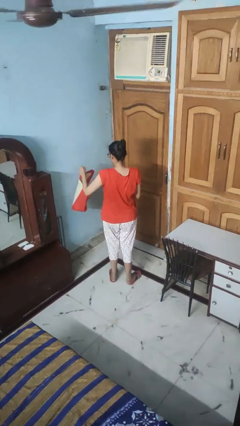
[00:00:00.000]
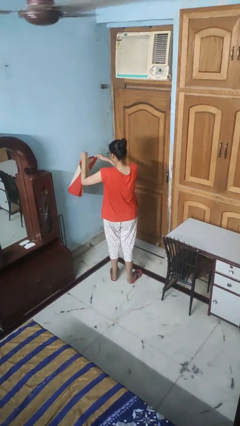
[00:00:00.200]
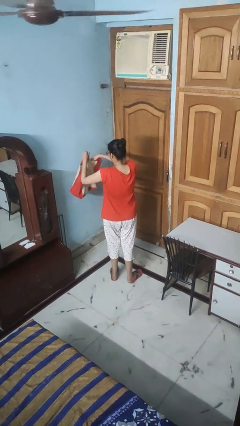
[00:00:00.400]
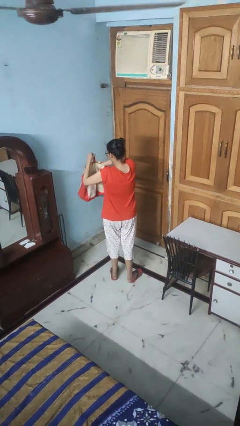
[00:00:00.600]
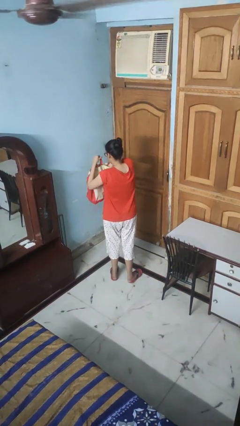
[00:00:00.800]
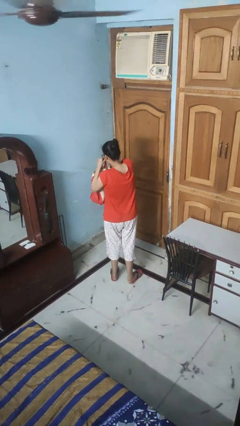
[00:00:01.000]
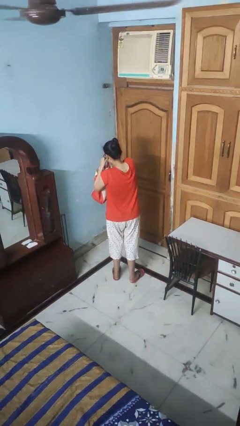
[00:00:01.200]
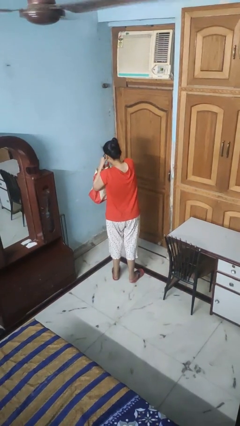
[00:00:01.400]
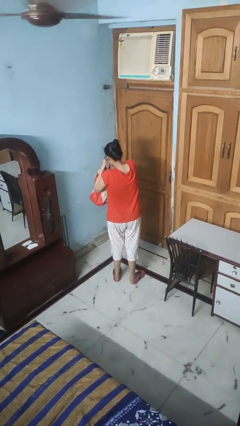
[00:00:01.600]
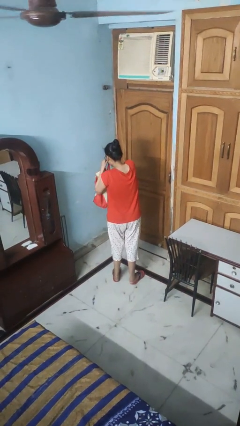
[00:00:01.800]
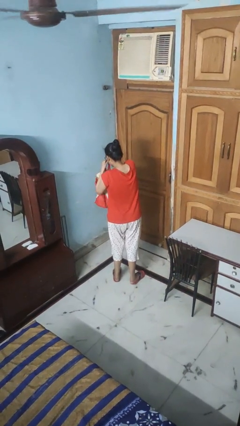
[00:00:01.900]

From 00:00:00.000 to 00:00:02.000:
person searches in bag

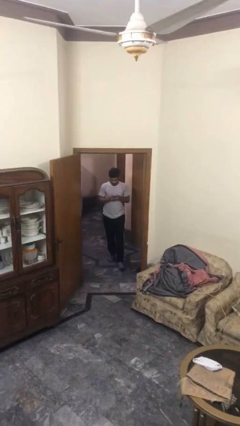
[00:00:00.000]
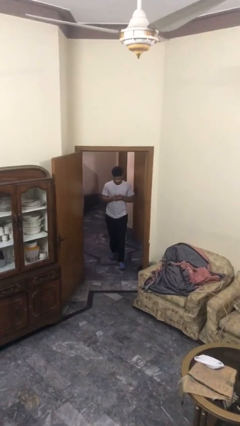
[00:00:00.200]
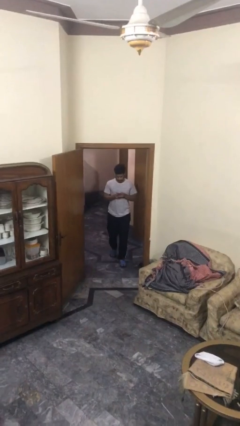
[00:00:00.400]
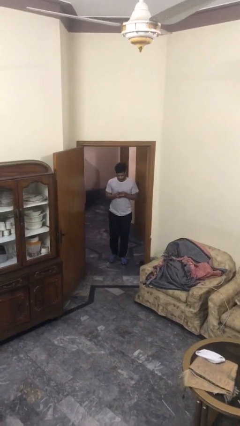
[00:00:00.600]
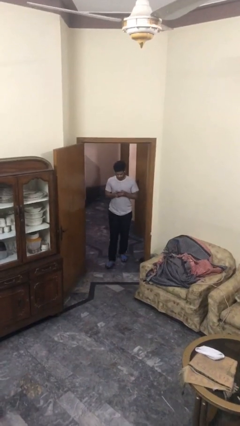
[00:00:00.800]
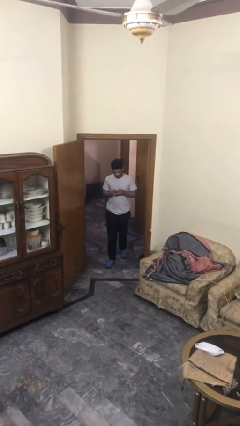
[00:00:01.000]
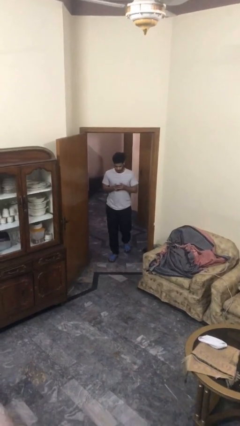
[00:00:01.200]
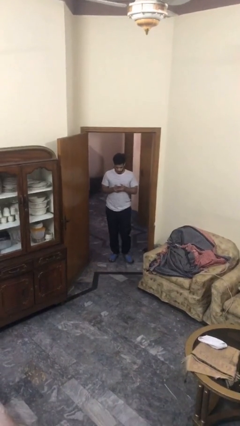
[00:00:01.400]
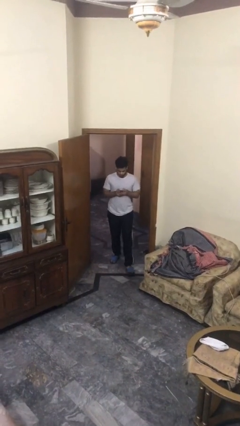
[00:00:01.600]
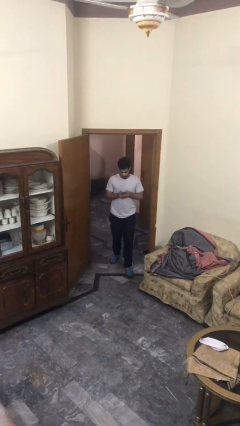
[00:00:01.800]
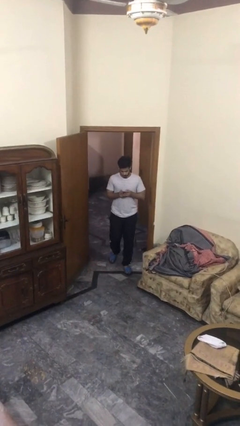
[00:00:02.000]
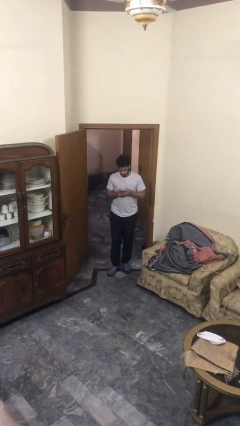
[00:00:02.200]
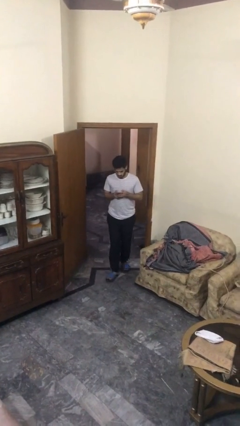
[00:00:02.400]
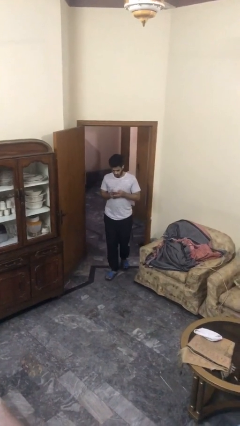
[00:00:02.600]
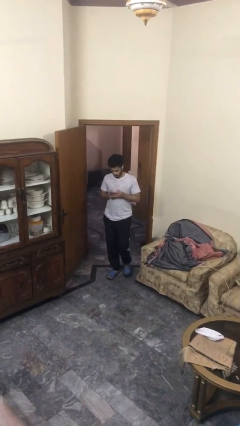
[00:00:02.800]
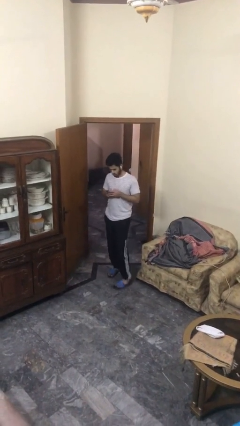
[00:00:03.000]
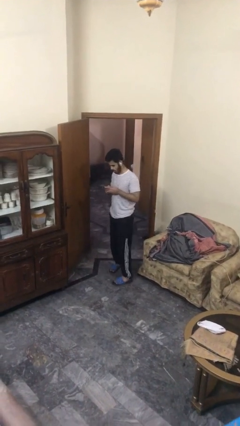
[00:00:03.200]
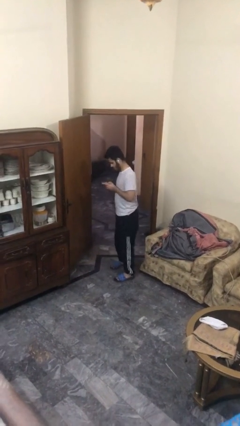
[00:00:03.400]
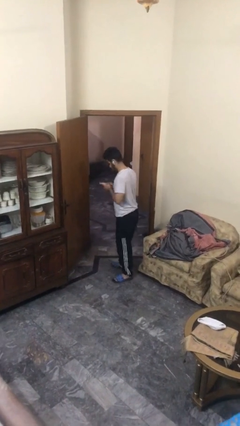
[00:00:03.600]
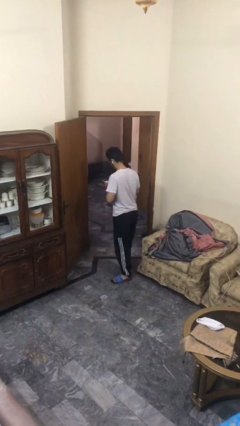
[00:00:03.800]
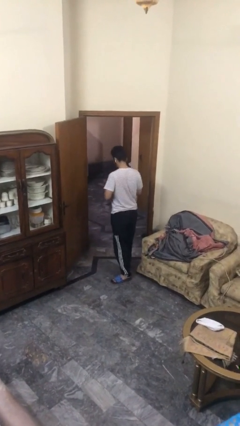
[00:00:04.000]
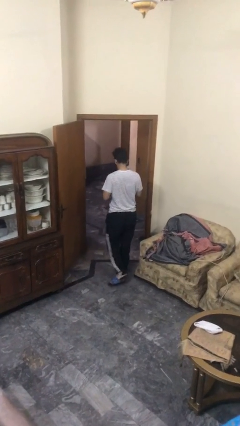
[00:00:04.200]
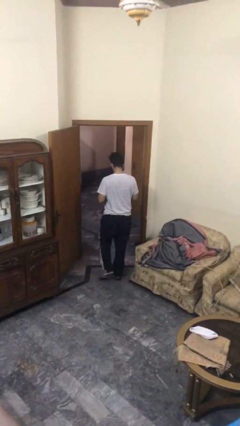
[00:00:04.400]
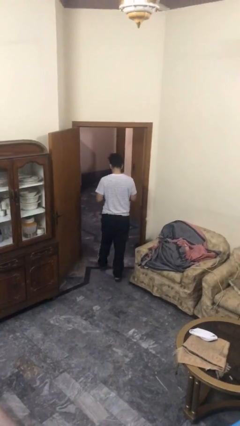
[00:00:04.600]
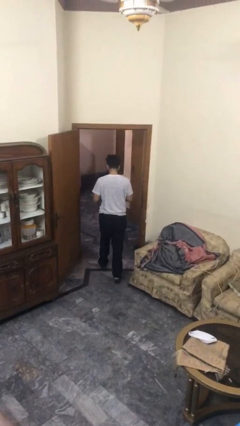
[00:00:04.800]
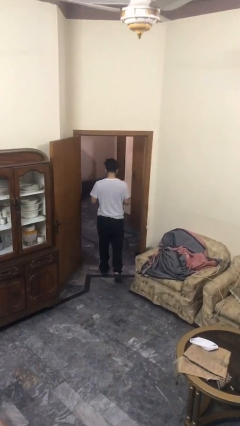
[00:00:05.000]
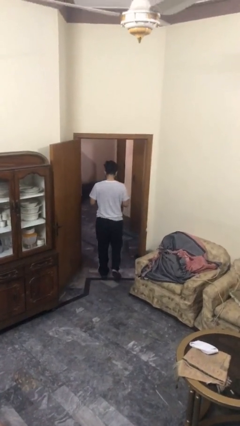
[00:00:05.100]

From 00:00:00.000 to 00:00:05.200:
person enters scene through structure

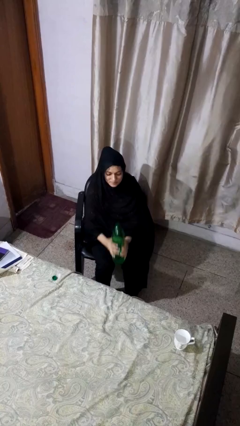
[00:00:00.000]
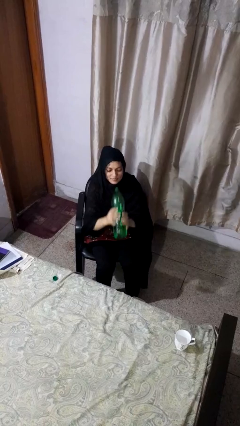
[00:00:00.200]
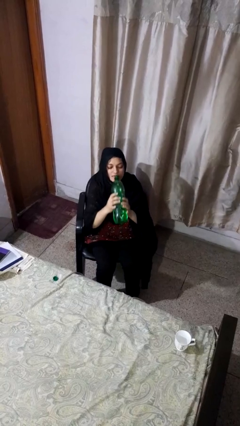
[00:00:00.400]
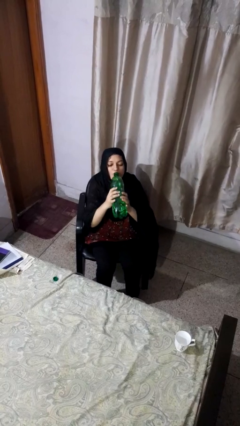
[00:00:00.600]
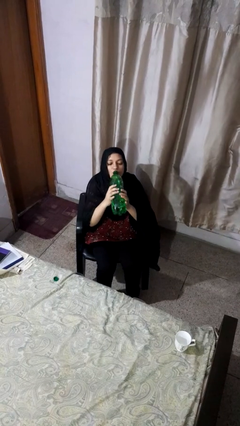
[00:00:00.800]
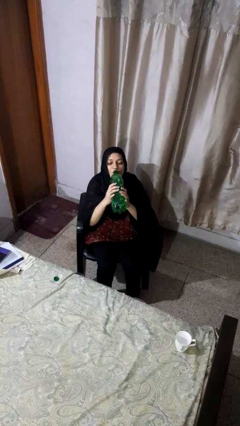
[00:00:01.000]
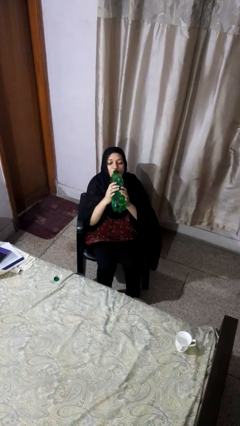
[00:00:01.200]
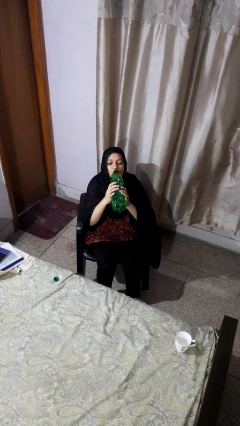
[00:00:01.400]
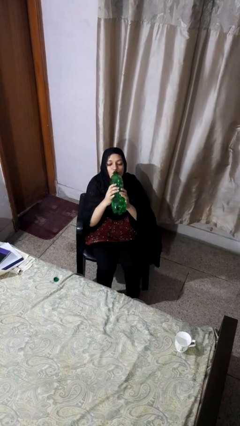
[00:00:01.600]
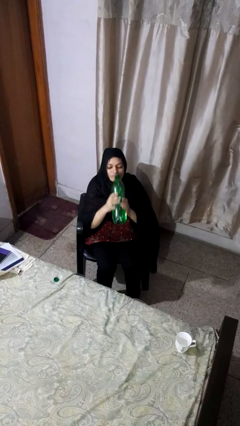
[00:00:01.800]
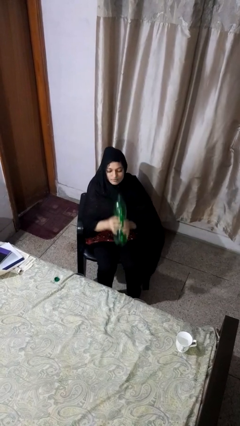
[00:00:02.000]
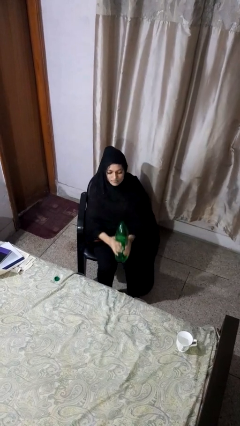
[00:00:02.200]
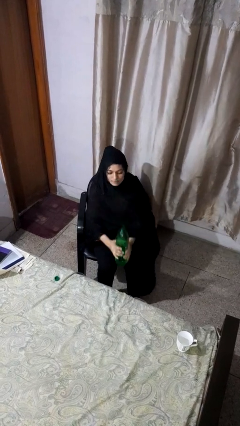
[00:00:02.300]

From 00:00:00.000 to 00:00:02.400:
person drinks from bottle

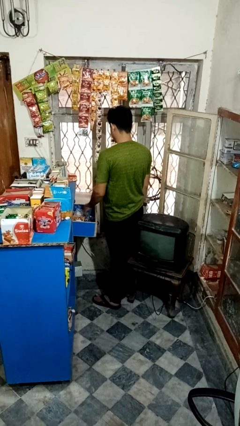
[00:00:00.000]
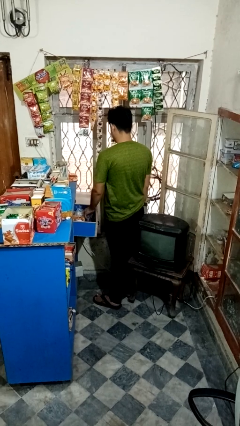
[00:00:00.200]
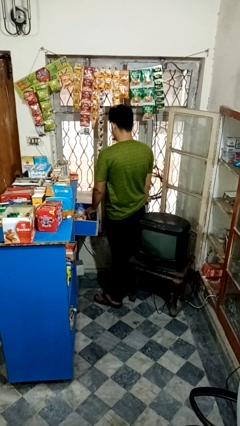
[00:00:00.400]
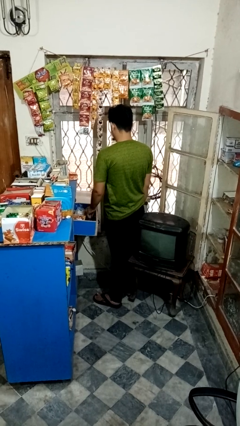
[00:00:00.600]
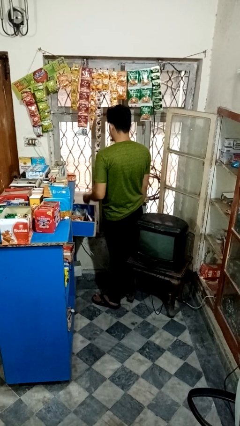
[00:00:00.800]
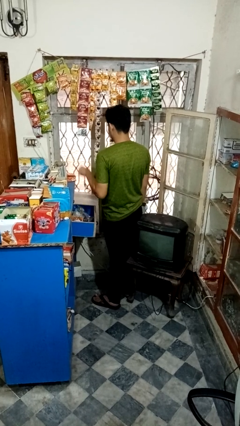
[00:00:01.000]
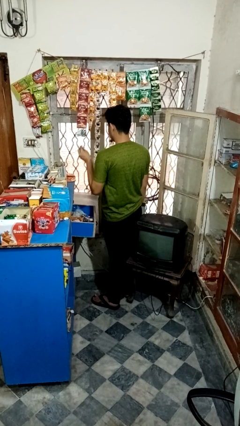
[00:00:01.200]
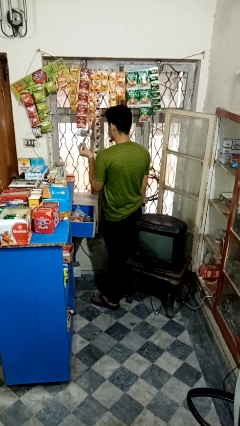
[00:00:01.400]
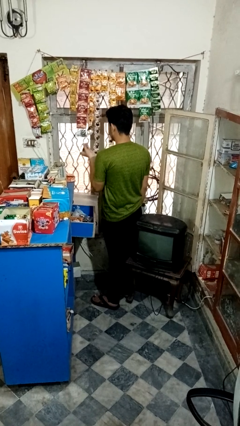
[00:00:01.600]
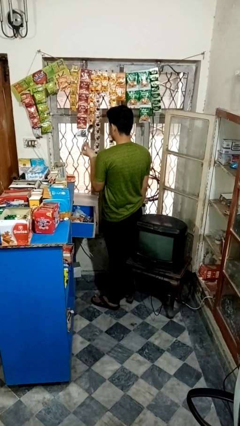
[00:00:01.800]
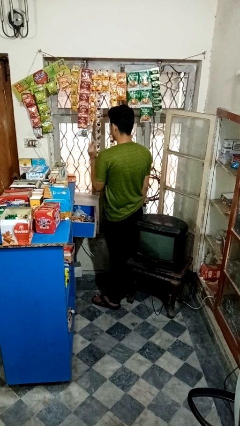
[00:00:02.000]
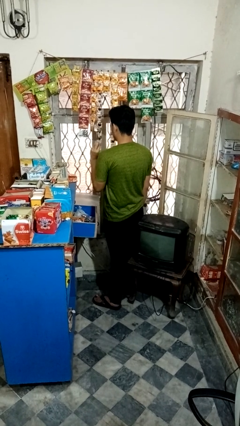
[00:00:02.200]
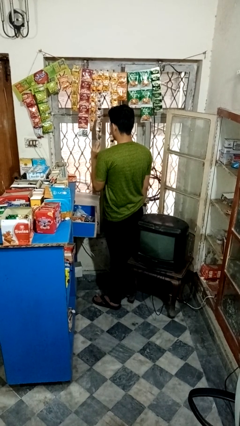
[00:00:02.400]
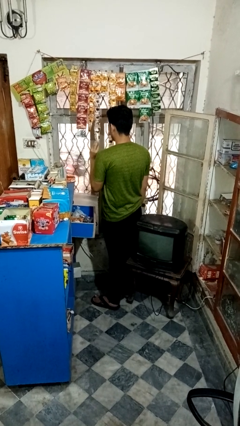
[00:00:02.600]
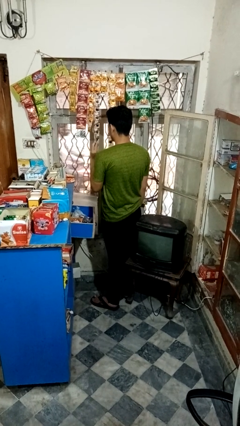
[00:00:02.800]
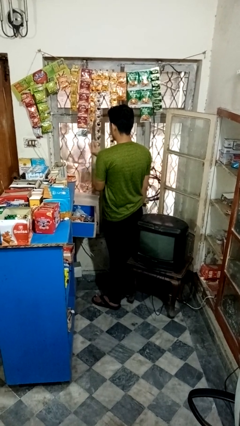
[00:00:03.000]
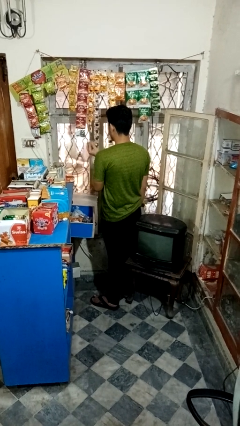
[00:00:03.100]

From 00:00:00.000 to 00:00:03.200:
person takes object from kitchen drawer

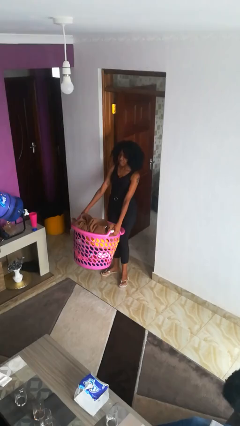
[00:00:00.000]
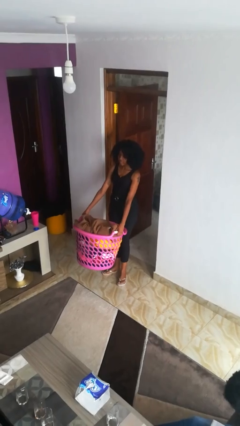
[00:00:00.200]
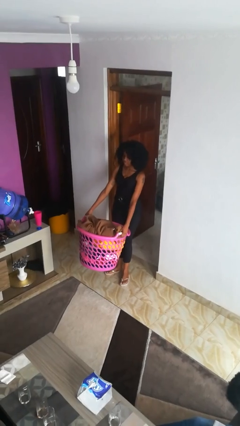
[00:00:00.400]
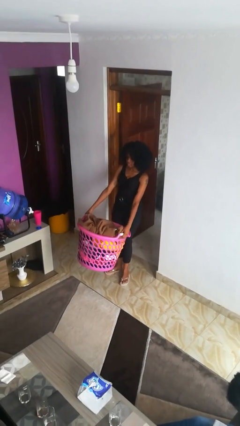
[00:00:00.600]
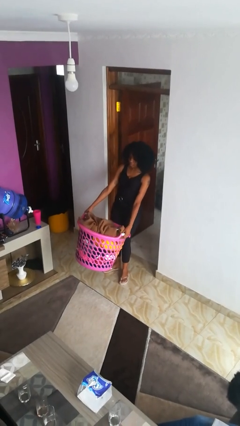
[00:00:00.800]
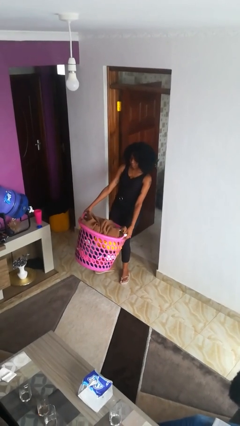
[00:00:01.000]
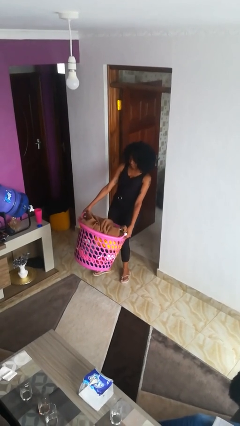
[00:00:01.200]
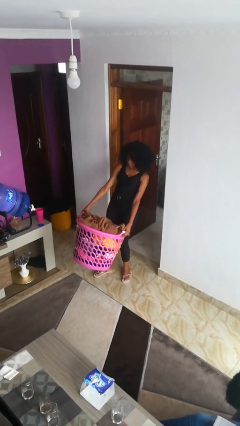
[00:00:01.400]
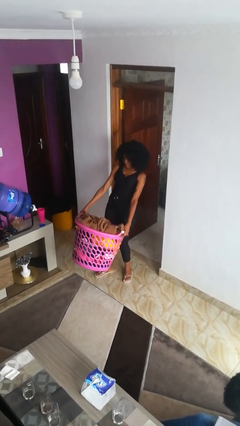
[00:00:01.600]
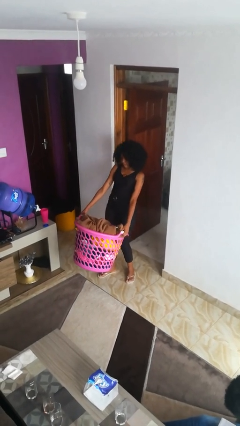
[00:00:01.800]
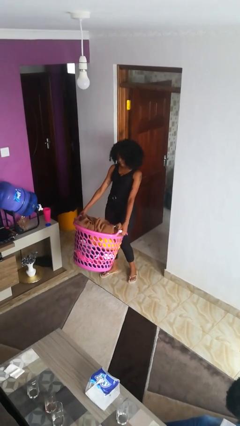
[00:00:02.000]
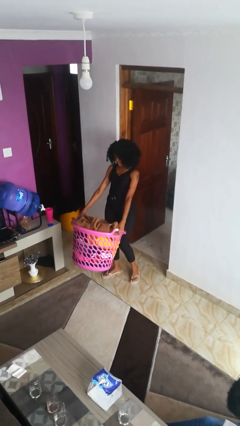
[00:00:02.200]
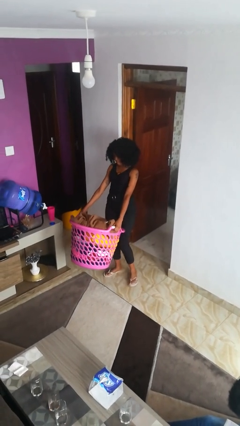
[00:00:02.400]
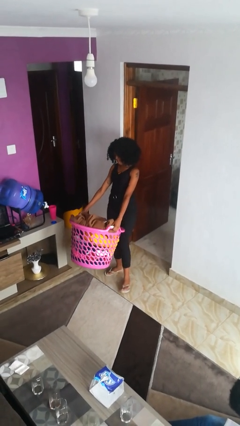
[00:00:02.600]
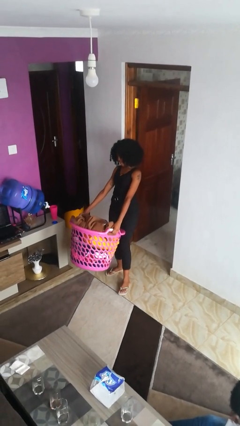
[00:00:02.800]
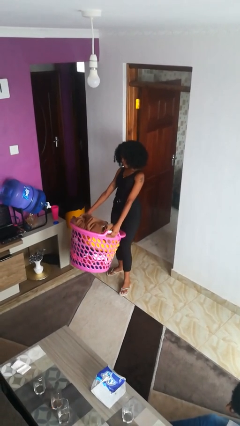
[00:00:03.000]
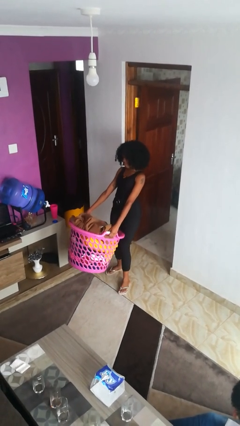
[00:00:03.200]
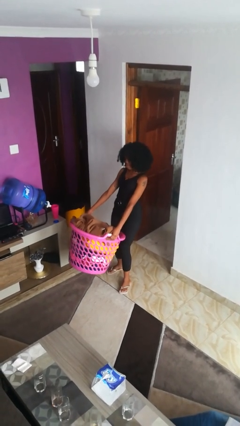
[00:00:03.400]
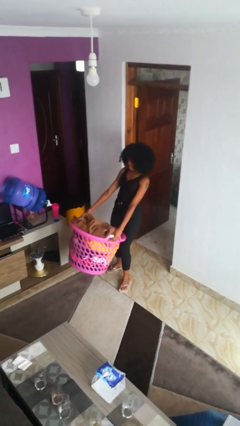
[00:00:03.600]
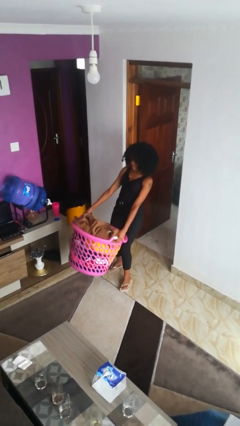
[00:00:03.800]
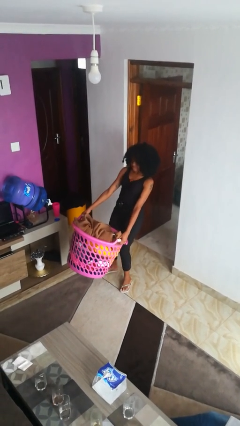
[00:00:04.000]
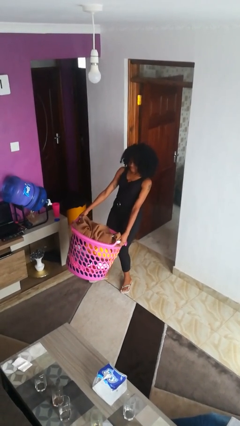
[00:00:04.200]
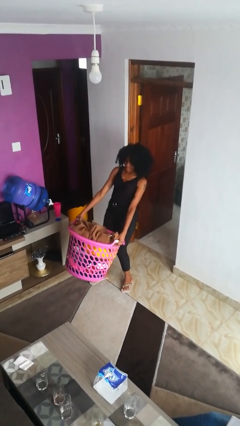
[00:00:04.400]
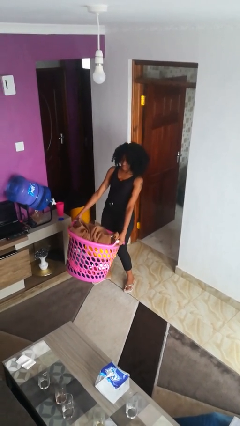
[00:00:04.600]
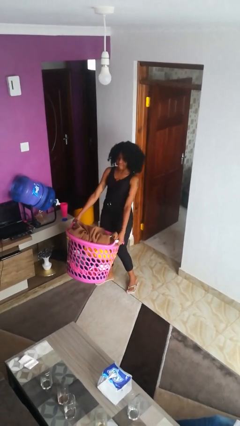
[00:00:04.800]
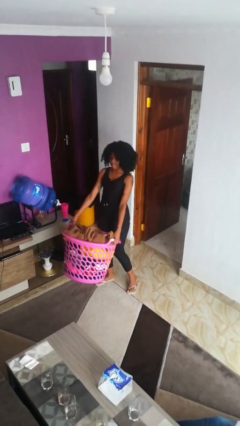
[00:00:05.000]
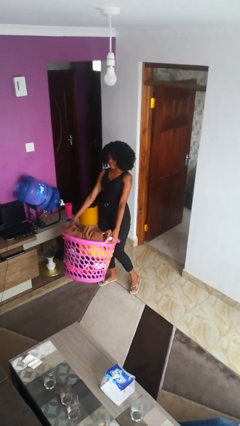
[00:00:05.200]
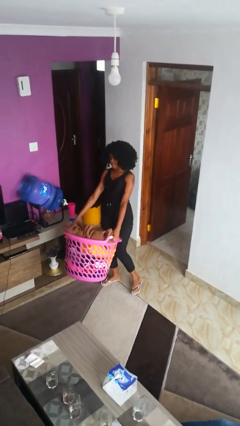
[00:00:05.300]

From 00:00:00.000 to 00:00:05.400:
person carries laundry basket
